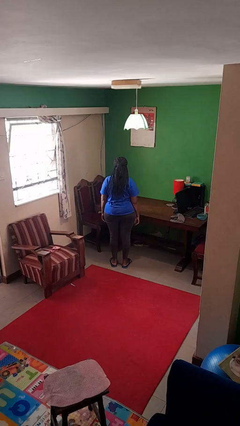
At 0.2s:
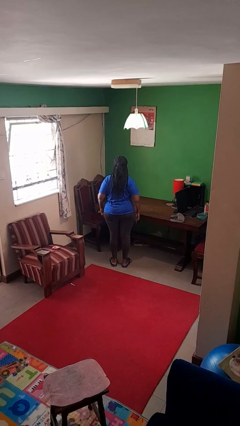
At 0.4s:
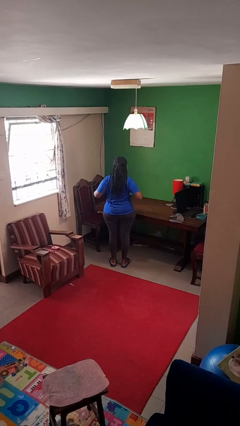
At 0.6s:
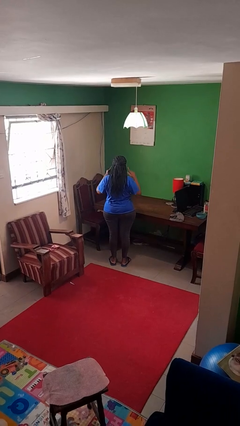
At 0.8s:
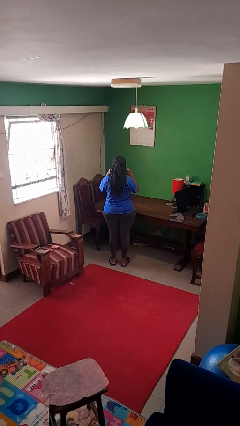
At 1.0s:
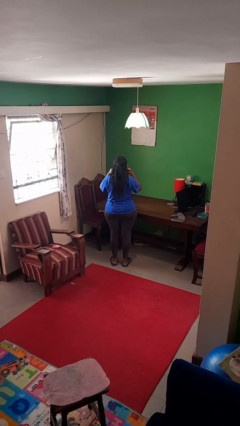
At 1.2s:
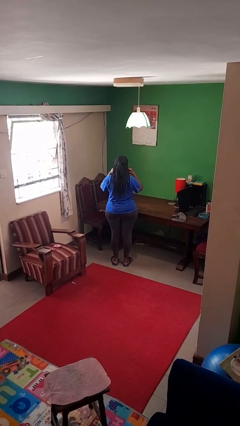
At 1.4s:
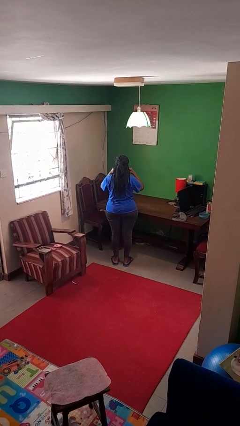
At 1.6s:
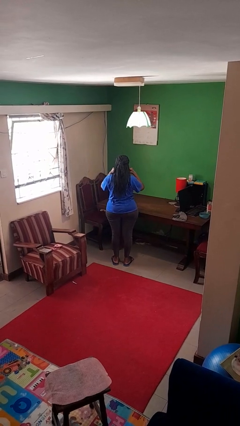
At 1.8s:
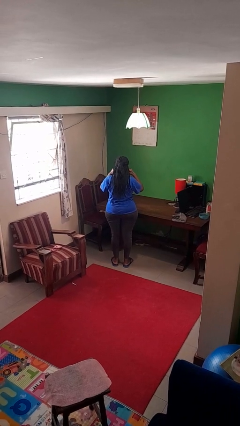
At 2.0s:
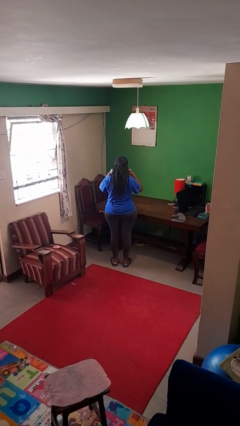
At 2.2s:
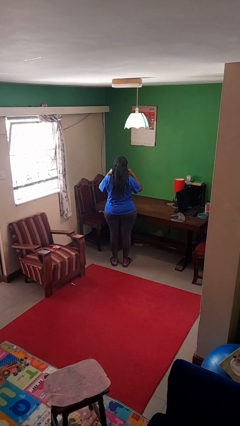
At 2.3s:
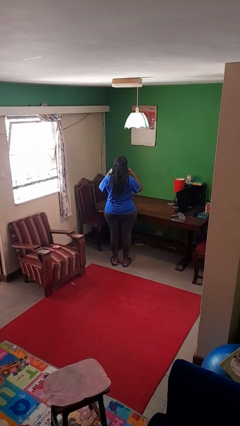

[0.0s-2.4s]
person puts fingers in ear

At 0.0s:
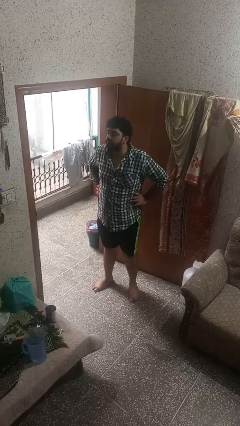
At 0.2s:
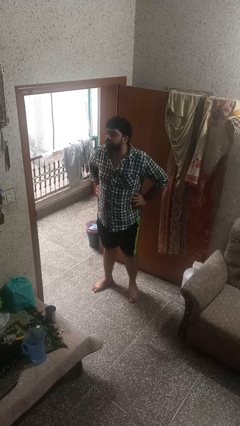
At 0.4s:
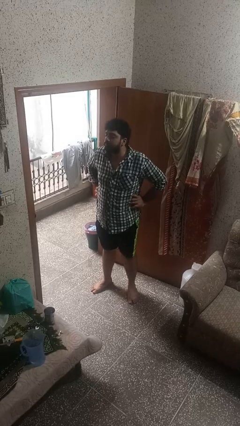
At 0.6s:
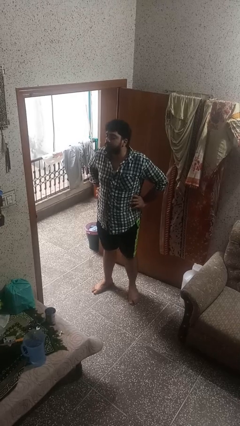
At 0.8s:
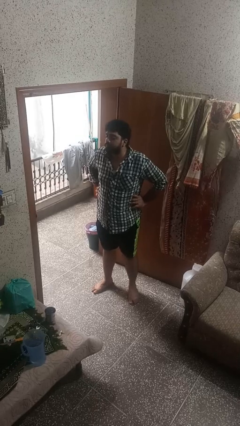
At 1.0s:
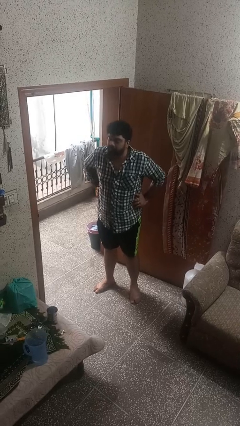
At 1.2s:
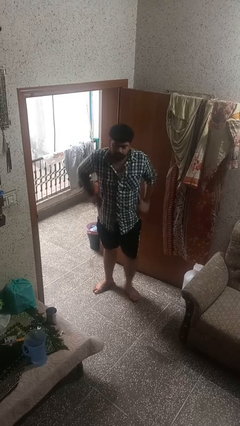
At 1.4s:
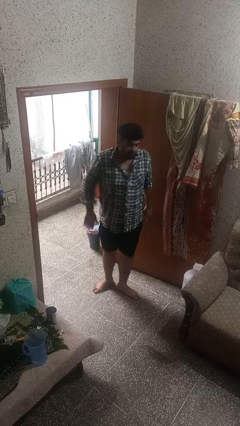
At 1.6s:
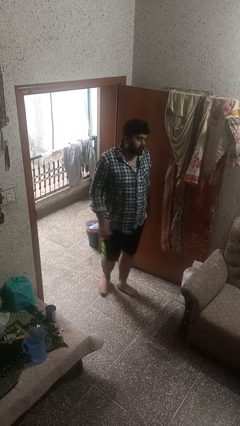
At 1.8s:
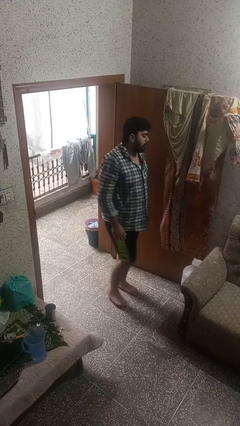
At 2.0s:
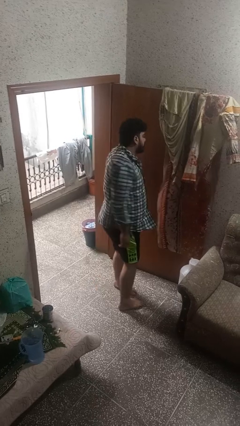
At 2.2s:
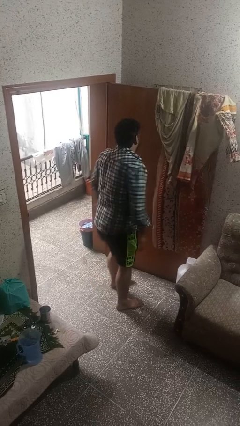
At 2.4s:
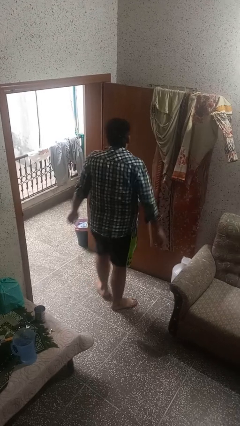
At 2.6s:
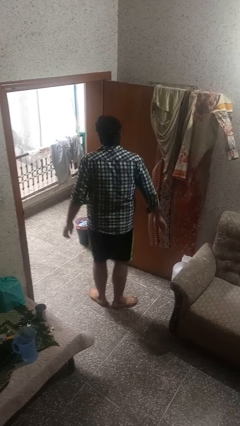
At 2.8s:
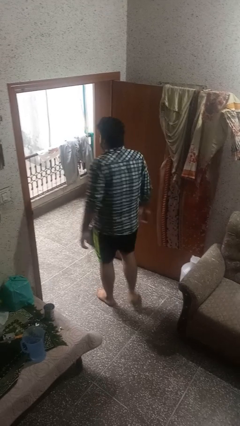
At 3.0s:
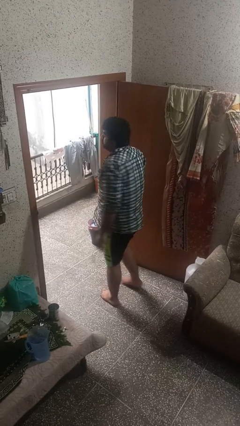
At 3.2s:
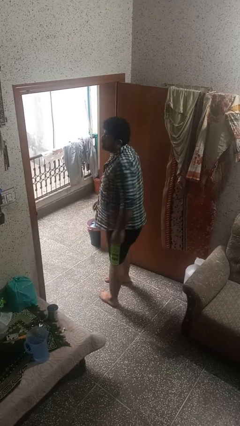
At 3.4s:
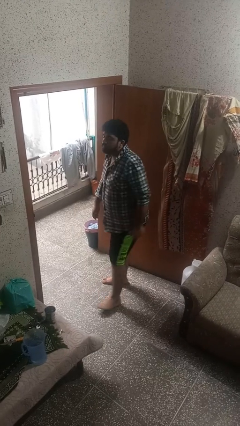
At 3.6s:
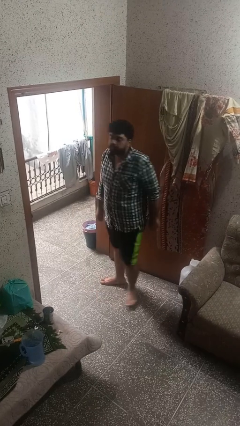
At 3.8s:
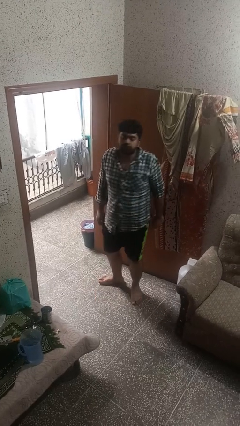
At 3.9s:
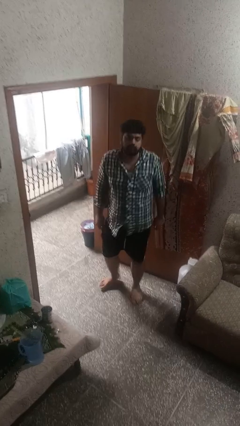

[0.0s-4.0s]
person twirls

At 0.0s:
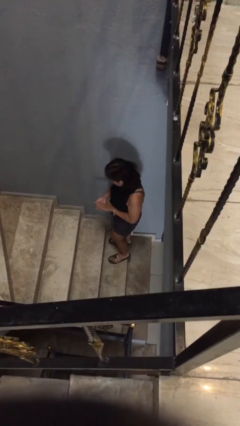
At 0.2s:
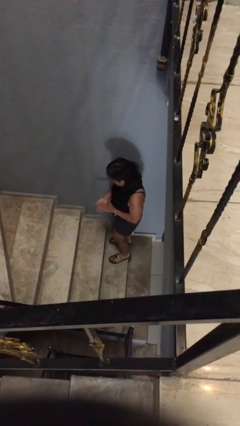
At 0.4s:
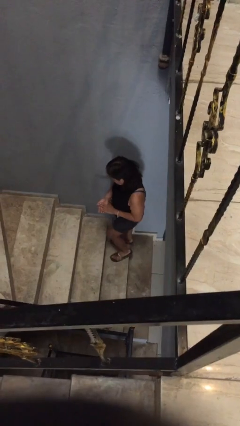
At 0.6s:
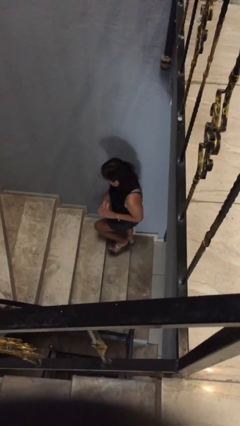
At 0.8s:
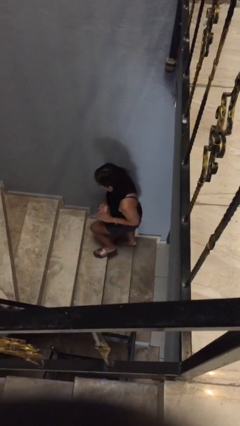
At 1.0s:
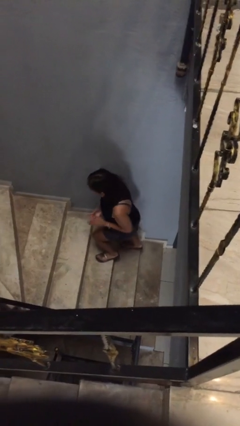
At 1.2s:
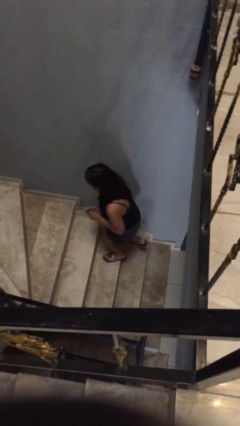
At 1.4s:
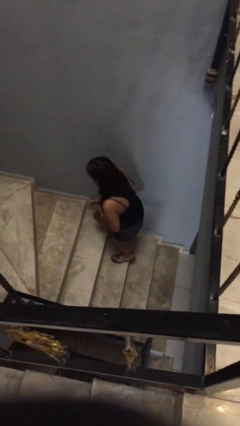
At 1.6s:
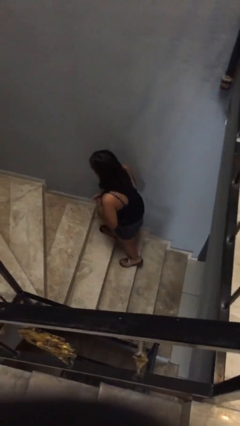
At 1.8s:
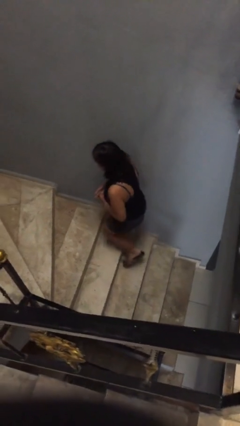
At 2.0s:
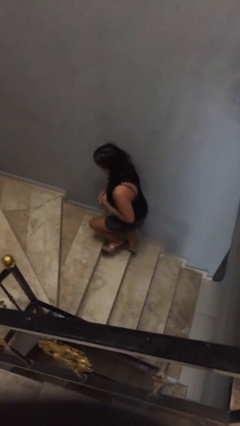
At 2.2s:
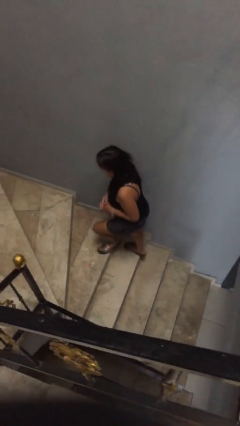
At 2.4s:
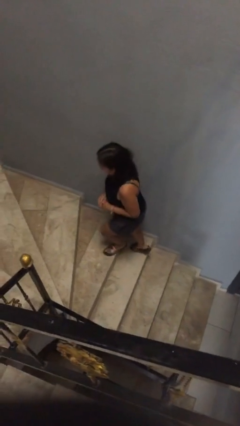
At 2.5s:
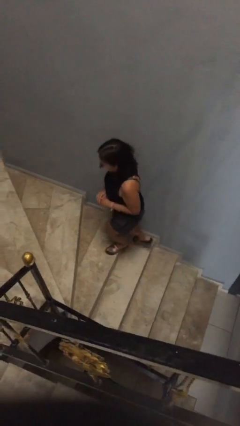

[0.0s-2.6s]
person climbs up stairs

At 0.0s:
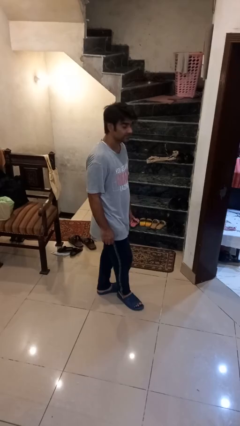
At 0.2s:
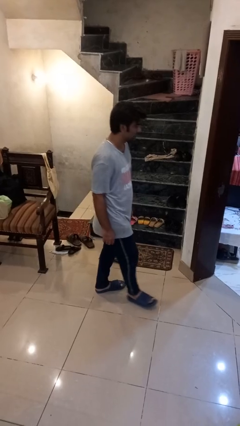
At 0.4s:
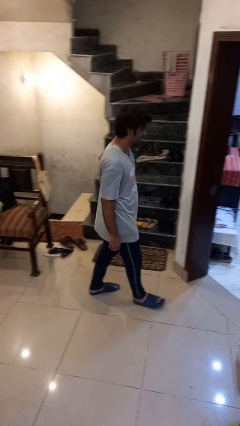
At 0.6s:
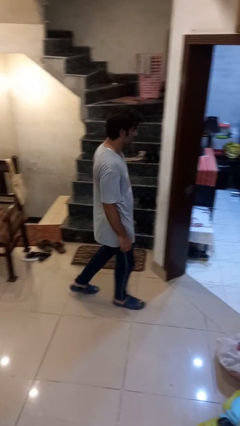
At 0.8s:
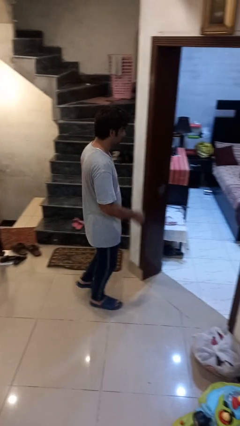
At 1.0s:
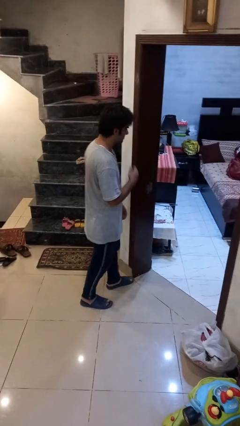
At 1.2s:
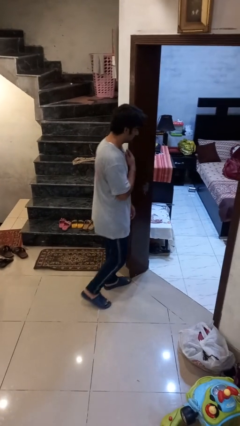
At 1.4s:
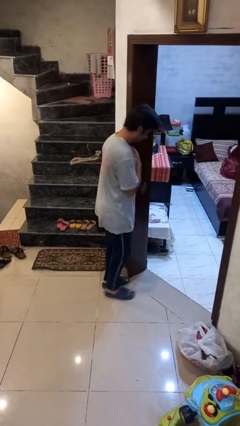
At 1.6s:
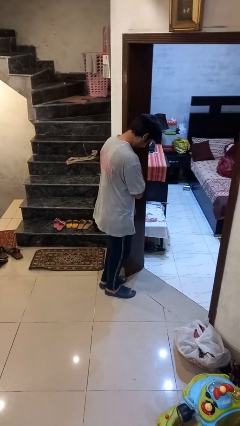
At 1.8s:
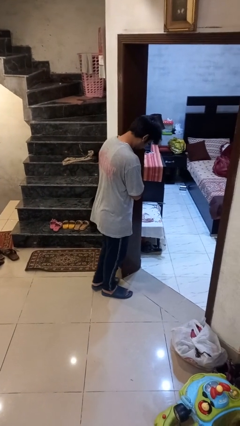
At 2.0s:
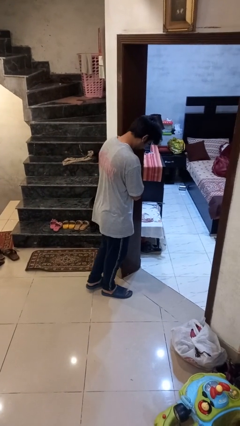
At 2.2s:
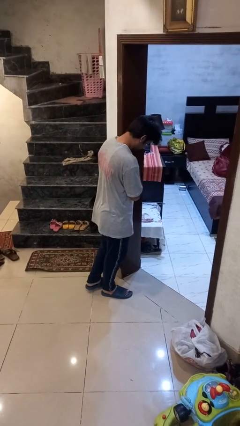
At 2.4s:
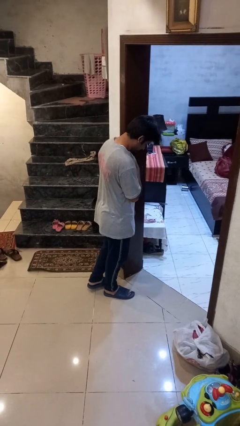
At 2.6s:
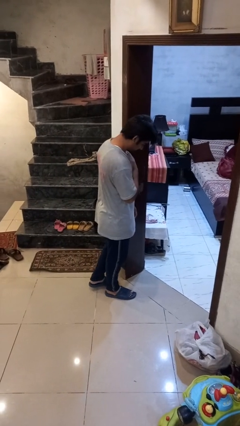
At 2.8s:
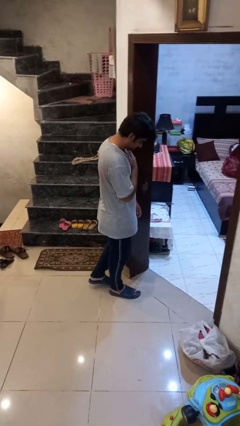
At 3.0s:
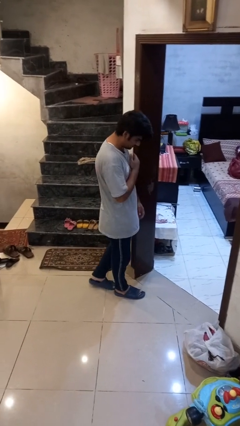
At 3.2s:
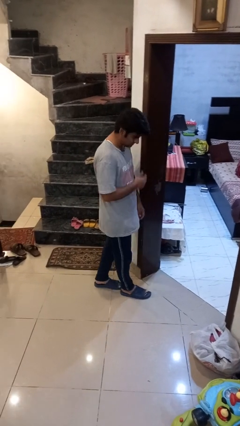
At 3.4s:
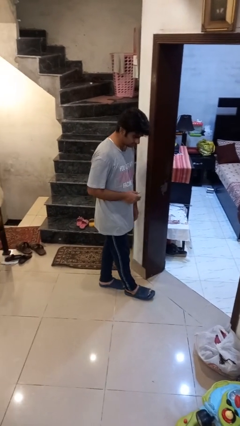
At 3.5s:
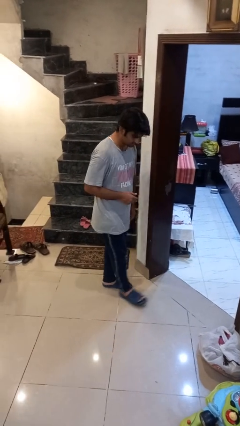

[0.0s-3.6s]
person bumps into wall

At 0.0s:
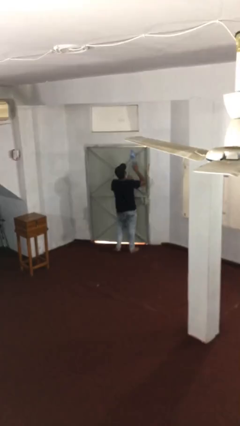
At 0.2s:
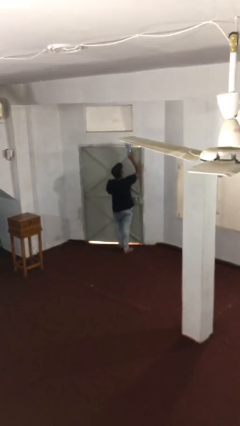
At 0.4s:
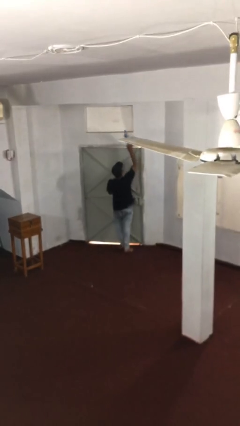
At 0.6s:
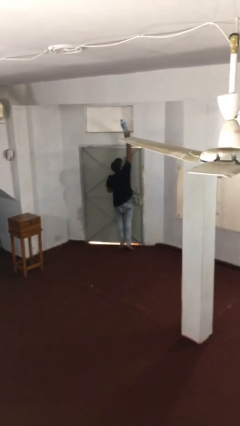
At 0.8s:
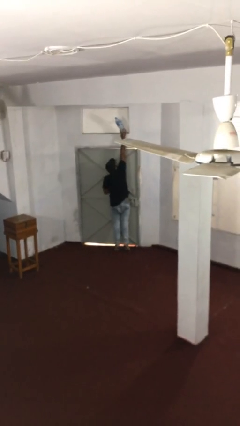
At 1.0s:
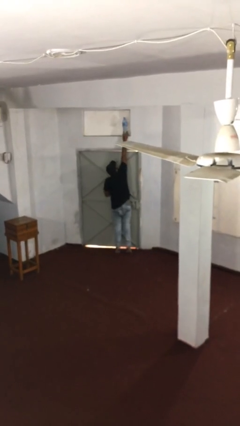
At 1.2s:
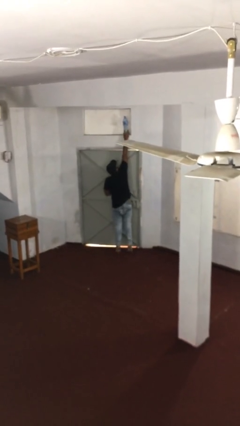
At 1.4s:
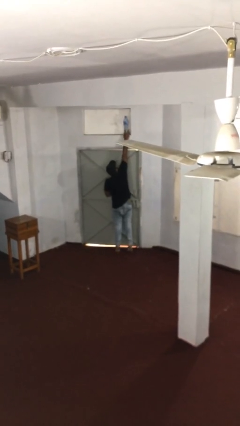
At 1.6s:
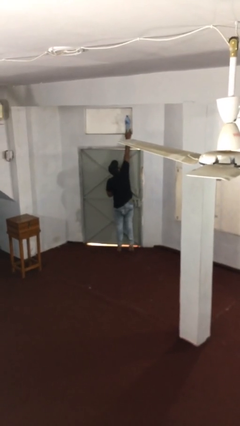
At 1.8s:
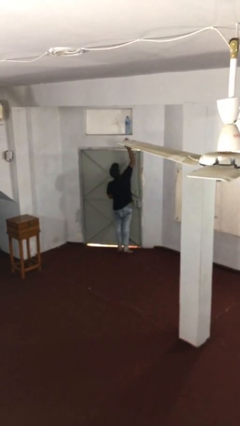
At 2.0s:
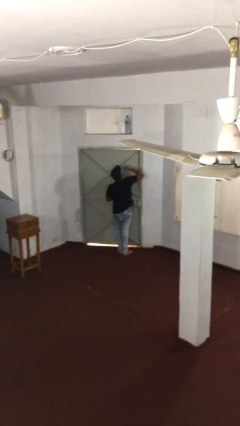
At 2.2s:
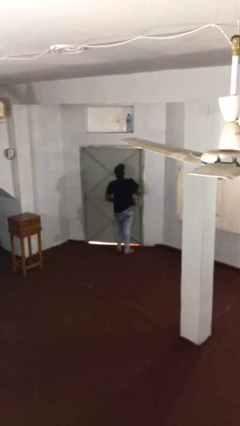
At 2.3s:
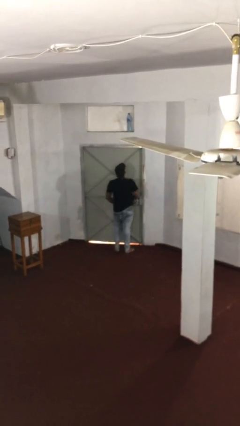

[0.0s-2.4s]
person puts down object on shelf

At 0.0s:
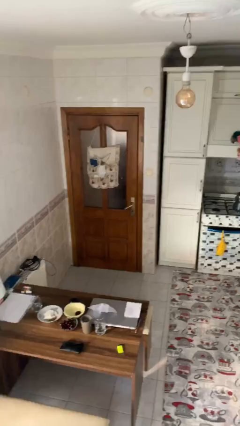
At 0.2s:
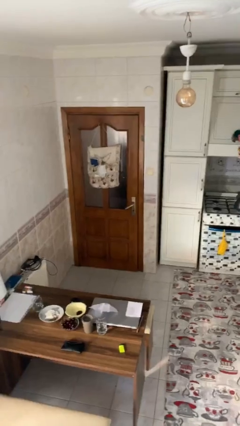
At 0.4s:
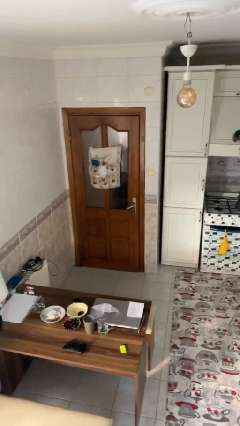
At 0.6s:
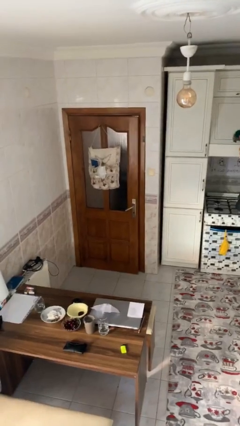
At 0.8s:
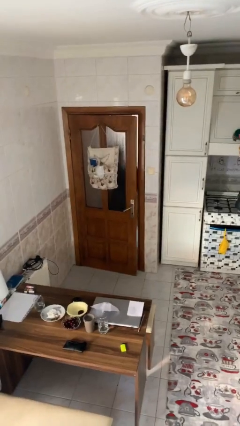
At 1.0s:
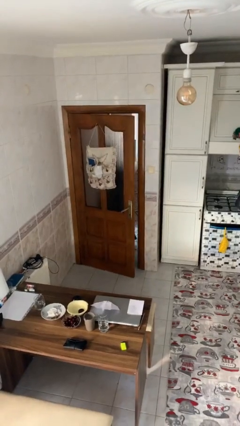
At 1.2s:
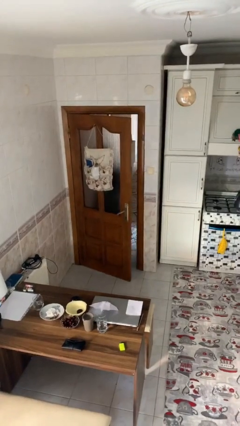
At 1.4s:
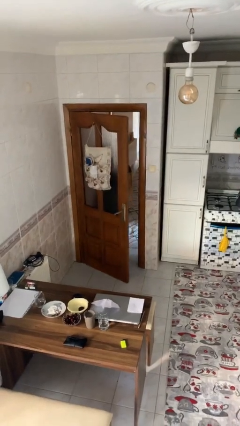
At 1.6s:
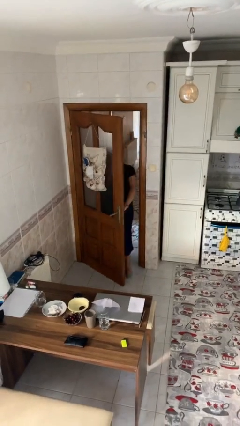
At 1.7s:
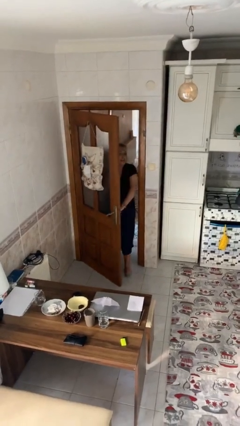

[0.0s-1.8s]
person opens facility door

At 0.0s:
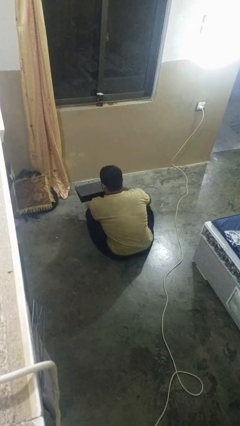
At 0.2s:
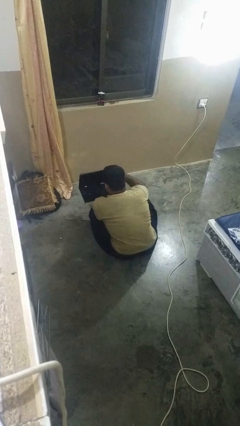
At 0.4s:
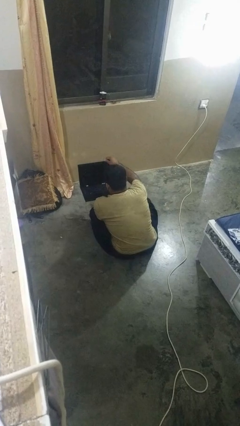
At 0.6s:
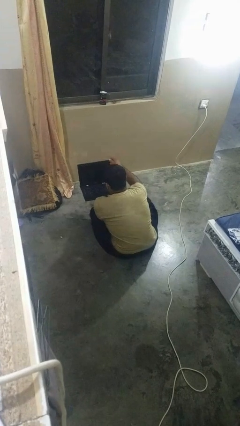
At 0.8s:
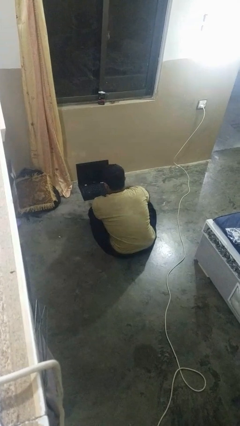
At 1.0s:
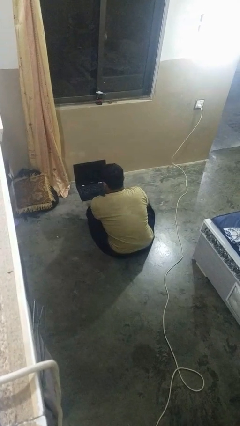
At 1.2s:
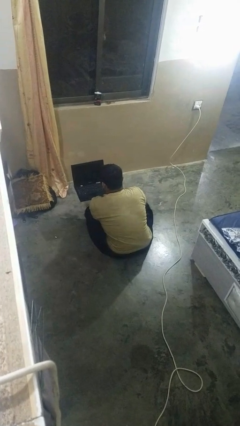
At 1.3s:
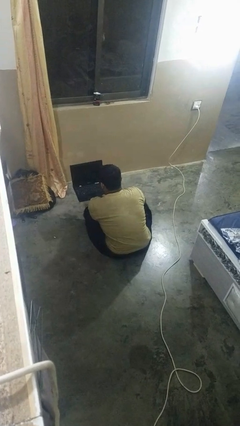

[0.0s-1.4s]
person opens laptop
